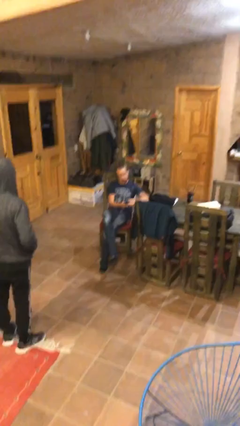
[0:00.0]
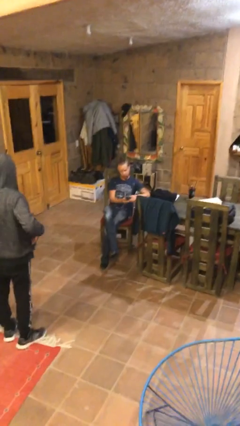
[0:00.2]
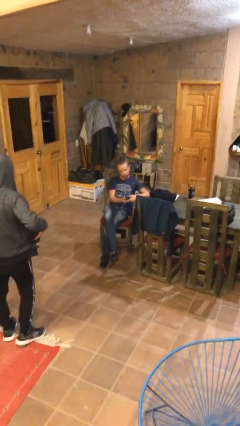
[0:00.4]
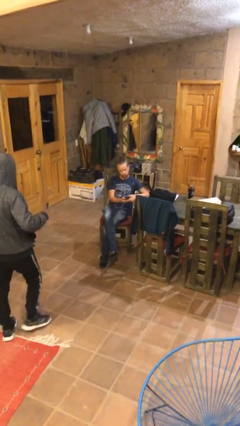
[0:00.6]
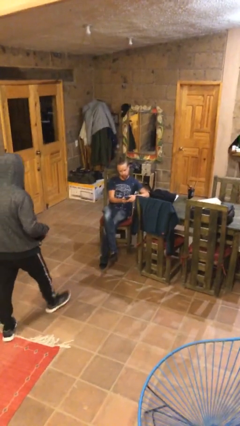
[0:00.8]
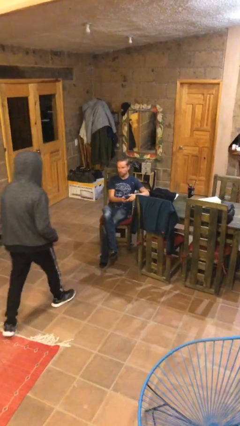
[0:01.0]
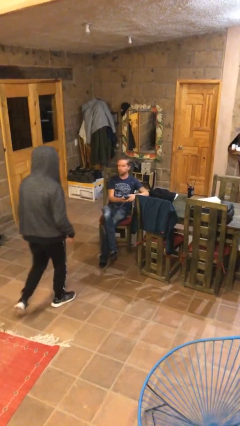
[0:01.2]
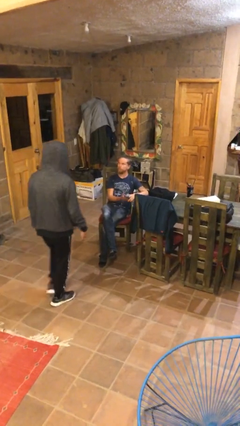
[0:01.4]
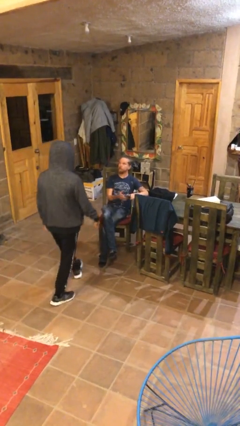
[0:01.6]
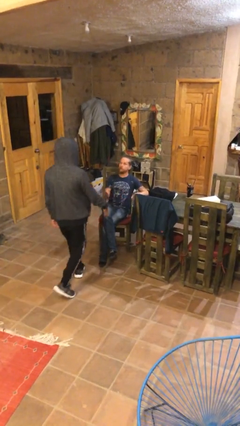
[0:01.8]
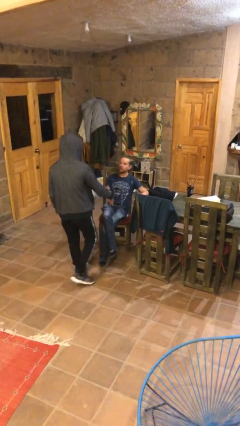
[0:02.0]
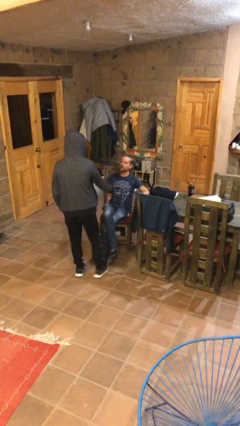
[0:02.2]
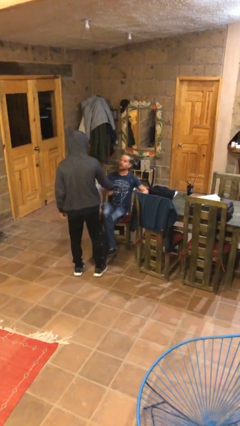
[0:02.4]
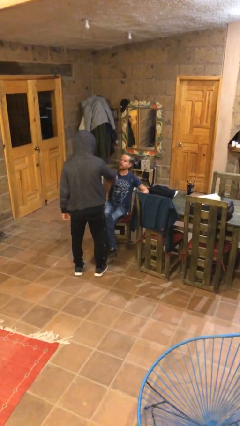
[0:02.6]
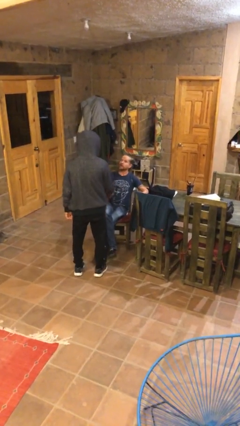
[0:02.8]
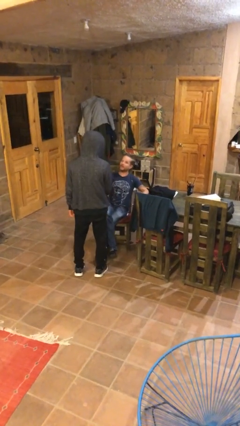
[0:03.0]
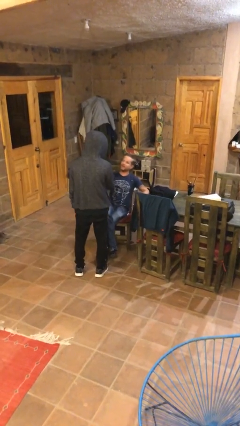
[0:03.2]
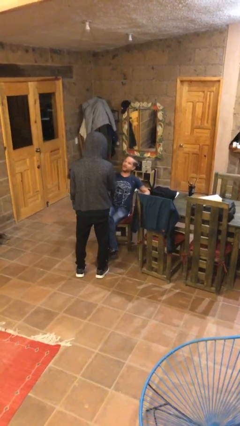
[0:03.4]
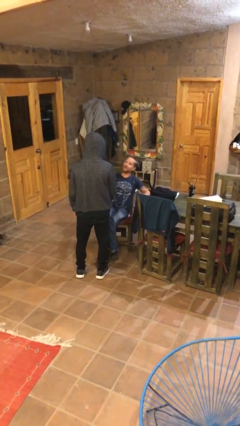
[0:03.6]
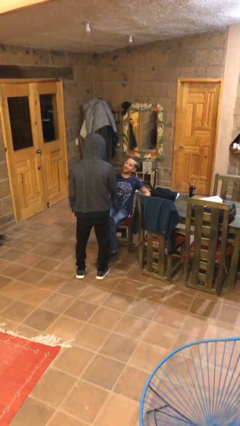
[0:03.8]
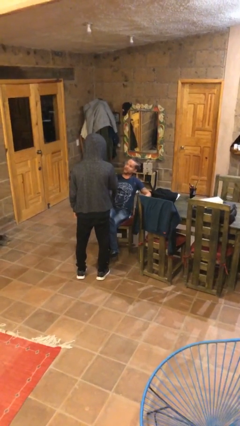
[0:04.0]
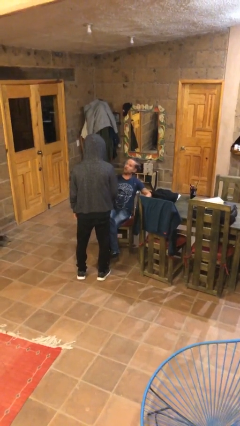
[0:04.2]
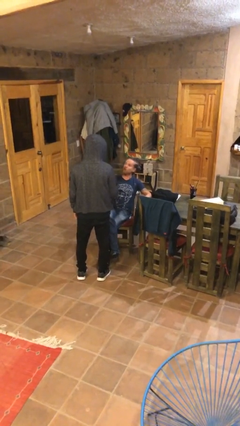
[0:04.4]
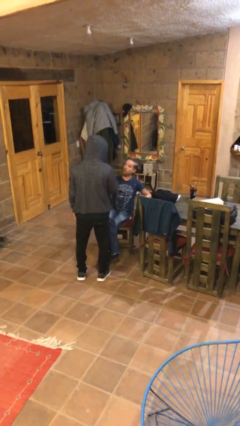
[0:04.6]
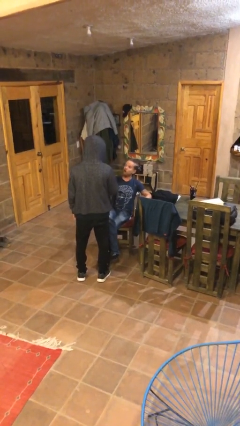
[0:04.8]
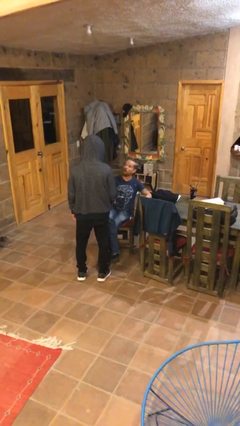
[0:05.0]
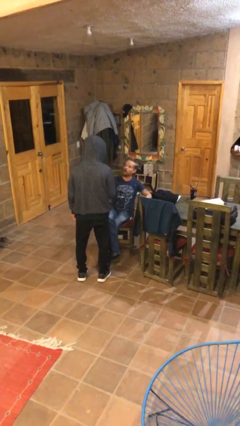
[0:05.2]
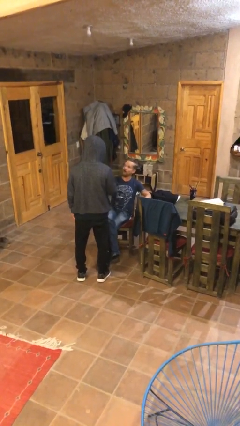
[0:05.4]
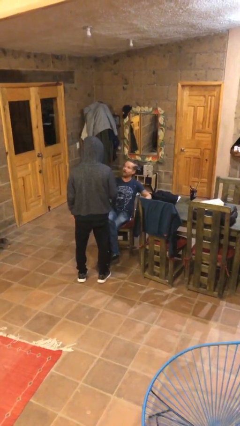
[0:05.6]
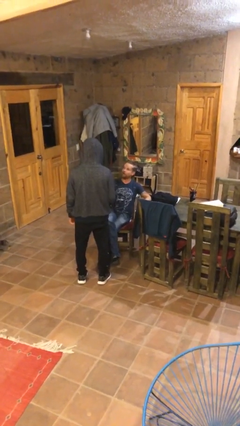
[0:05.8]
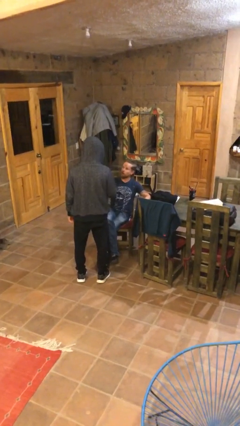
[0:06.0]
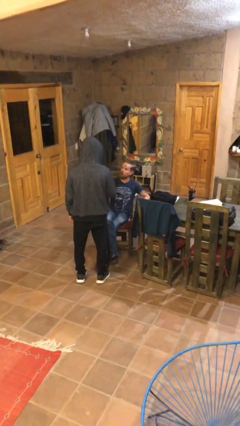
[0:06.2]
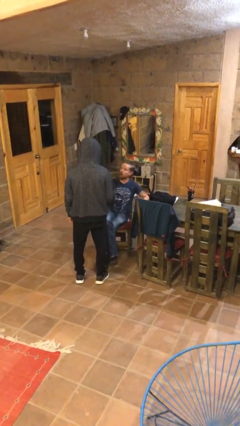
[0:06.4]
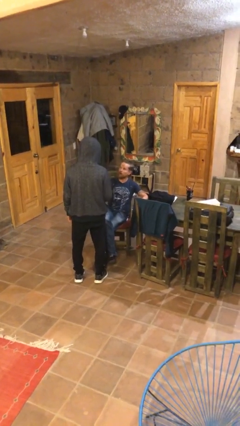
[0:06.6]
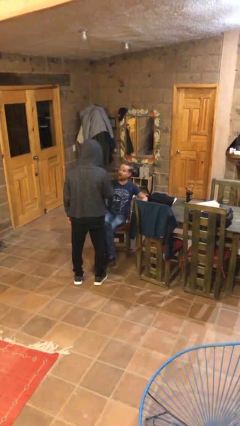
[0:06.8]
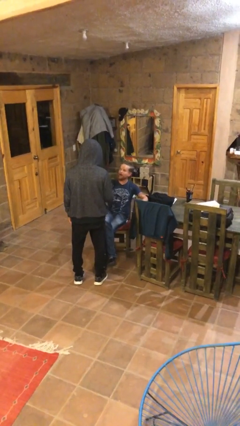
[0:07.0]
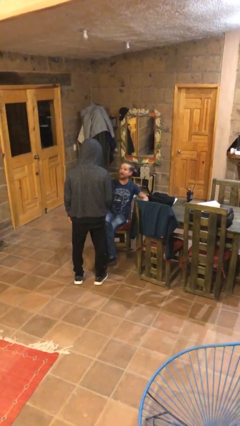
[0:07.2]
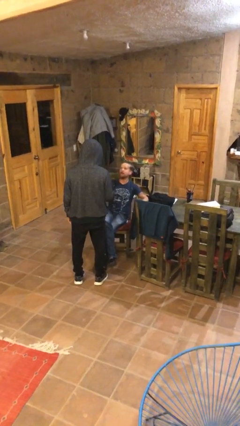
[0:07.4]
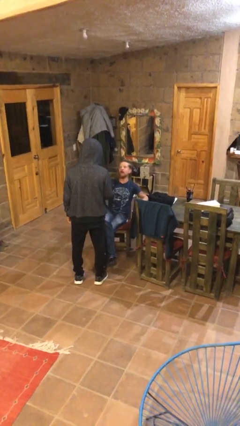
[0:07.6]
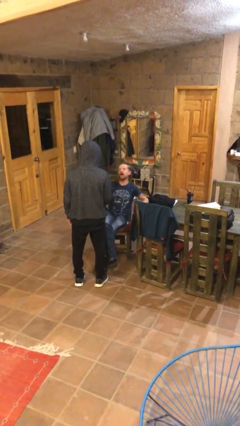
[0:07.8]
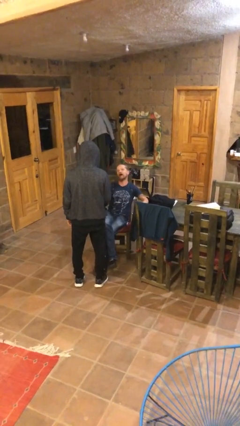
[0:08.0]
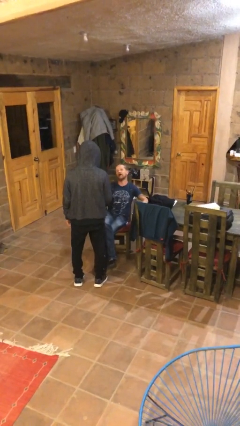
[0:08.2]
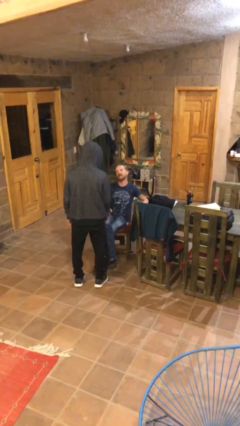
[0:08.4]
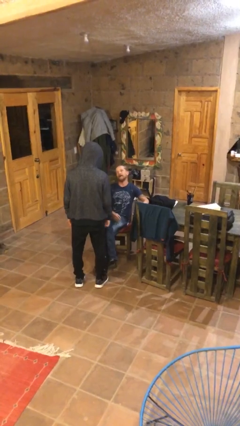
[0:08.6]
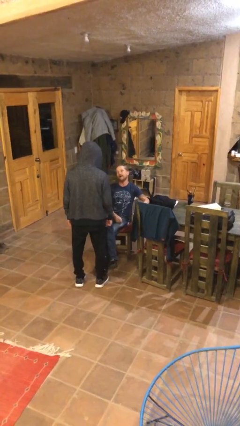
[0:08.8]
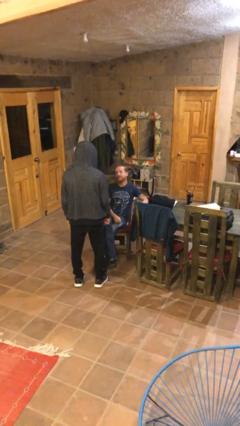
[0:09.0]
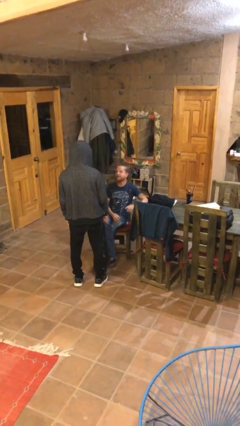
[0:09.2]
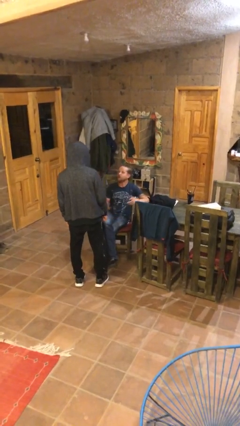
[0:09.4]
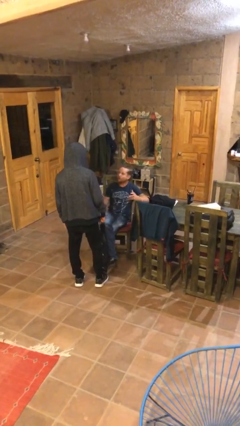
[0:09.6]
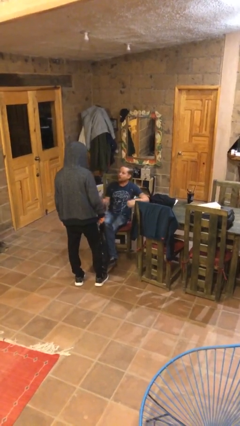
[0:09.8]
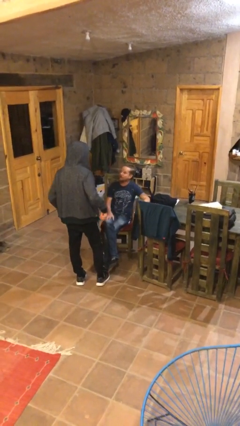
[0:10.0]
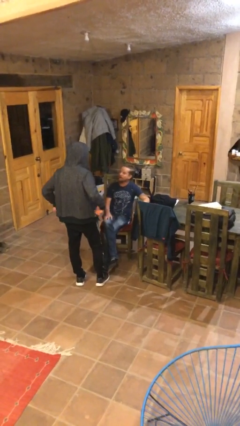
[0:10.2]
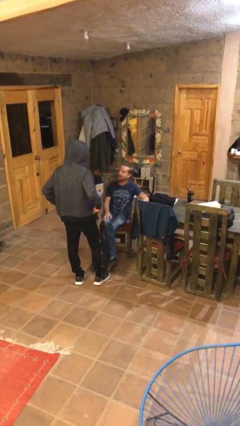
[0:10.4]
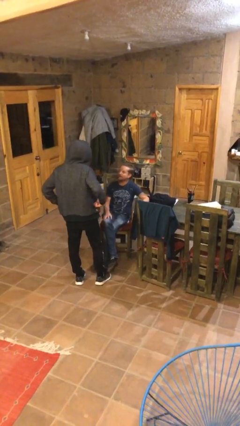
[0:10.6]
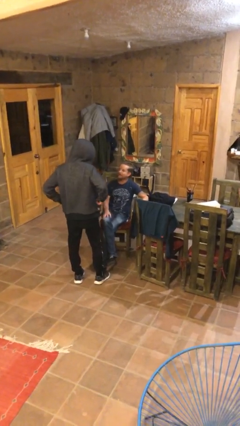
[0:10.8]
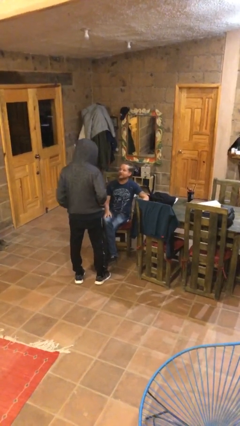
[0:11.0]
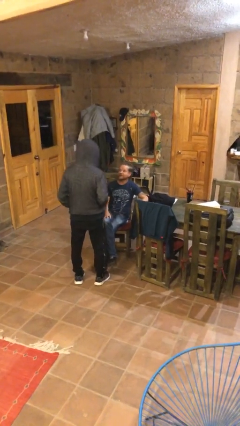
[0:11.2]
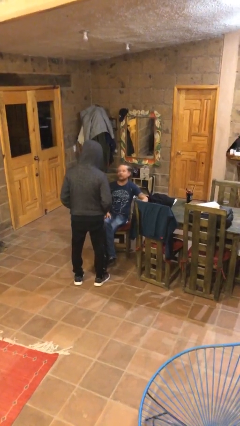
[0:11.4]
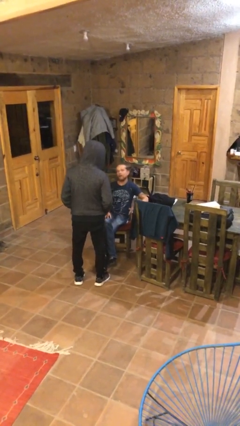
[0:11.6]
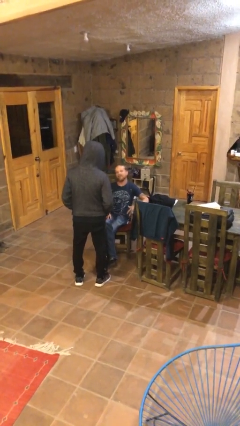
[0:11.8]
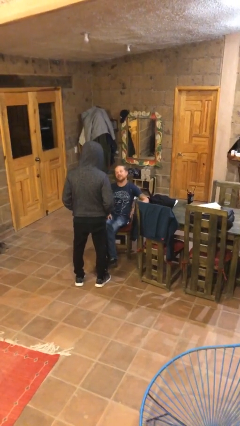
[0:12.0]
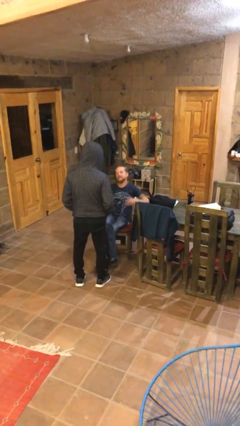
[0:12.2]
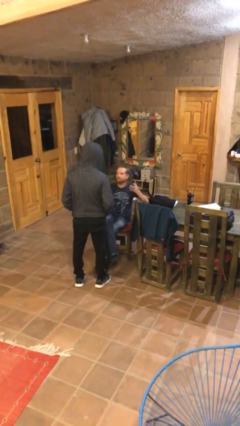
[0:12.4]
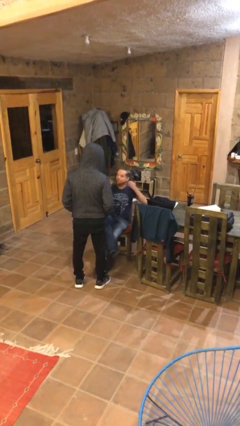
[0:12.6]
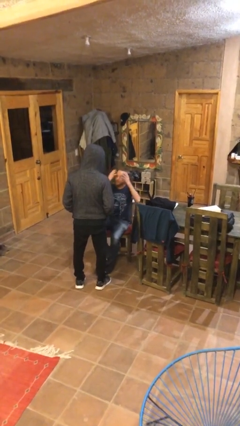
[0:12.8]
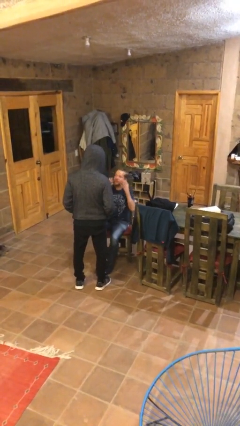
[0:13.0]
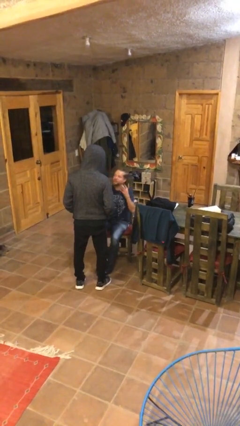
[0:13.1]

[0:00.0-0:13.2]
person shakes hand

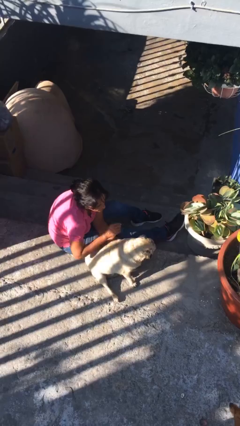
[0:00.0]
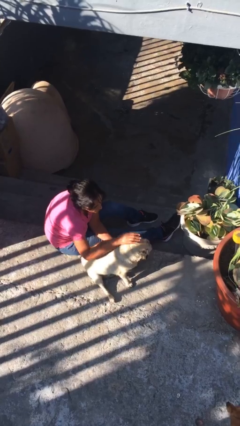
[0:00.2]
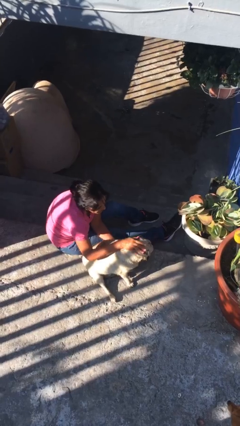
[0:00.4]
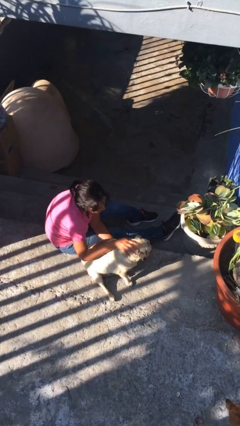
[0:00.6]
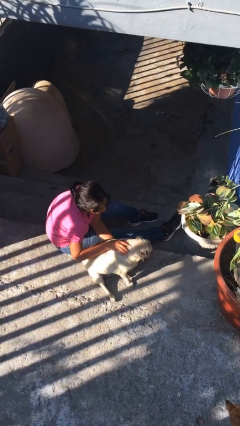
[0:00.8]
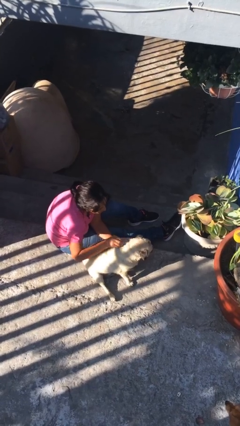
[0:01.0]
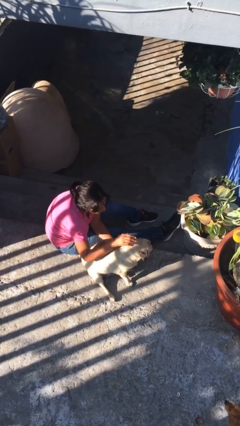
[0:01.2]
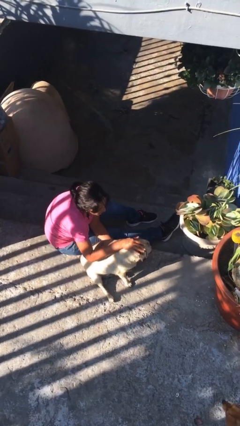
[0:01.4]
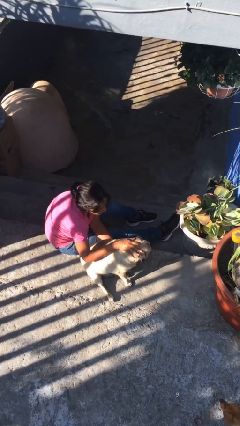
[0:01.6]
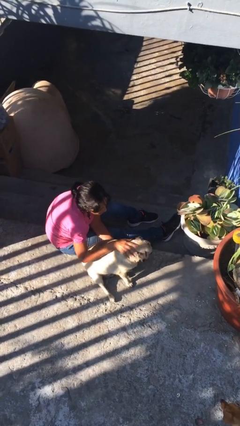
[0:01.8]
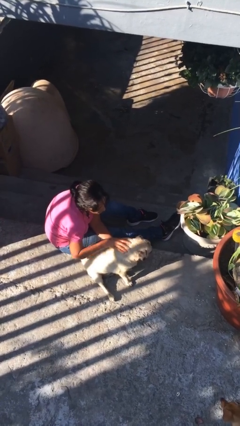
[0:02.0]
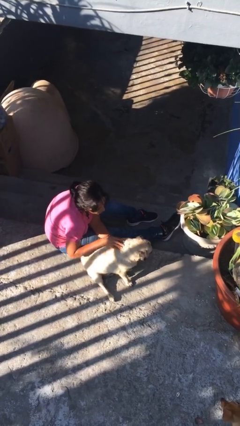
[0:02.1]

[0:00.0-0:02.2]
person pets dog

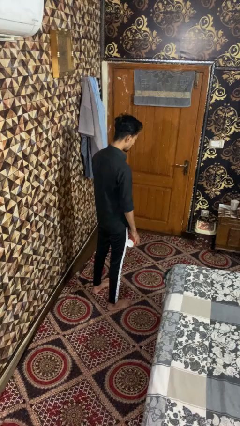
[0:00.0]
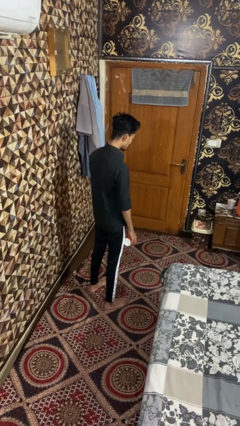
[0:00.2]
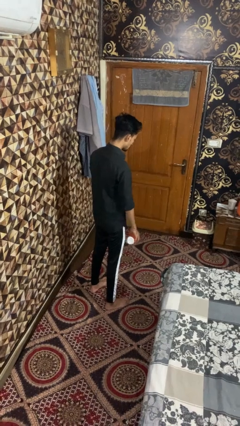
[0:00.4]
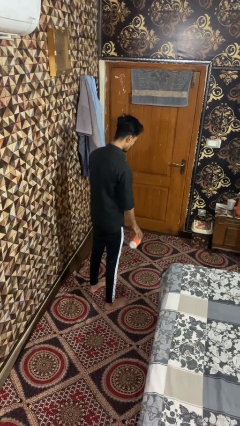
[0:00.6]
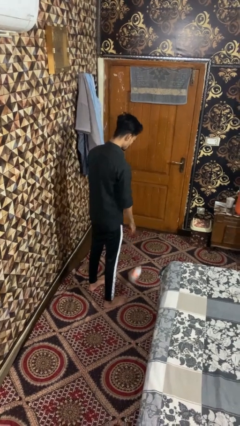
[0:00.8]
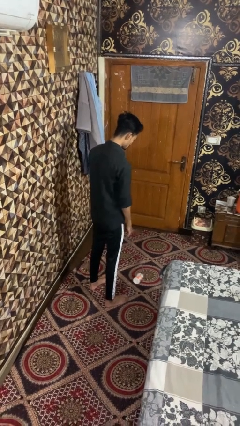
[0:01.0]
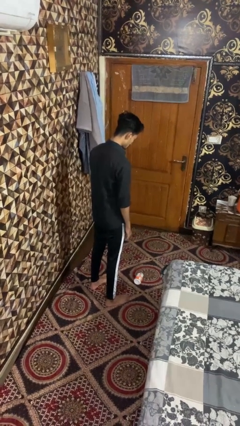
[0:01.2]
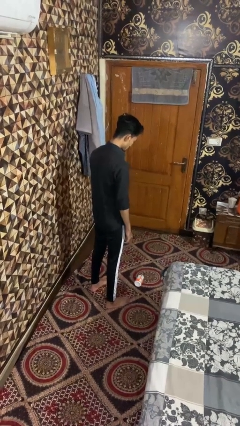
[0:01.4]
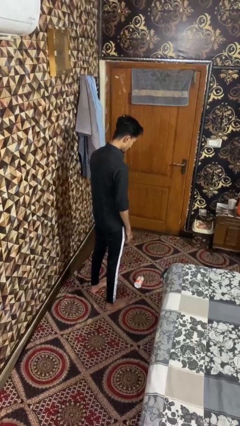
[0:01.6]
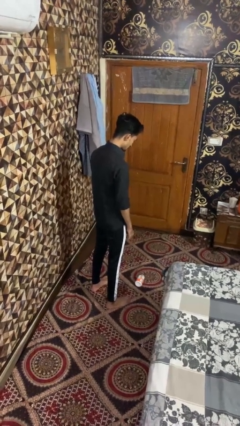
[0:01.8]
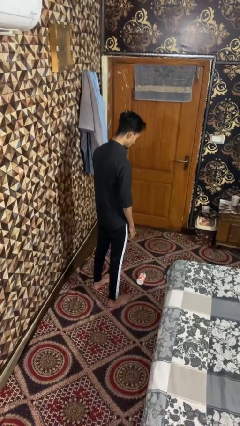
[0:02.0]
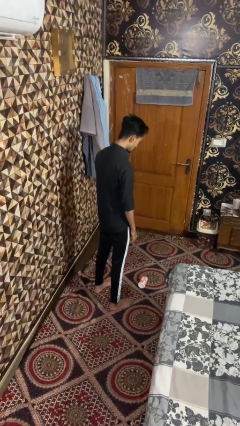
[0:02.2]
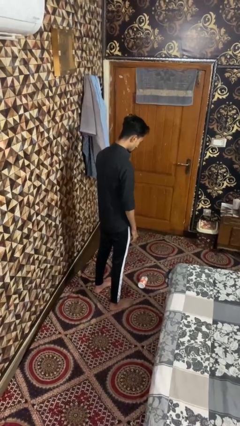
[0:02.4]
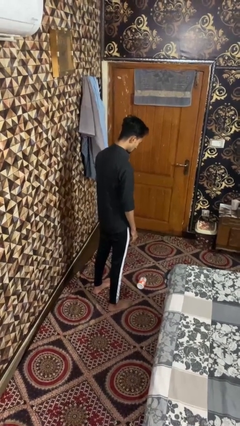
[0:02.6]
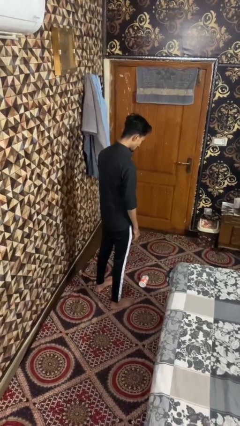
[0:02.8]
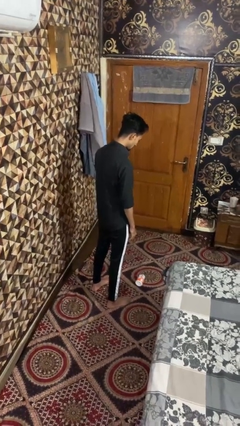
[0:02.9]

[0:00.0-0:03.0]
person trips on object on floor
